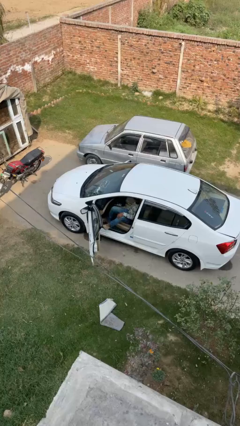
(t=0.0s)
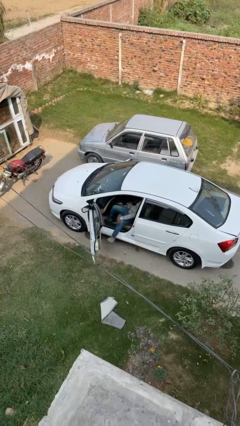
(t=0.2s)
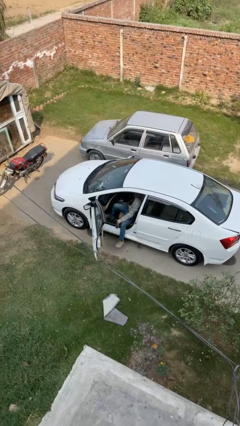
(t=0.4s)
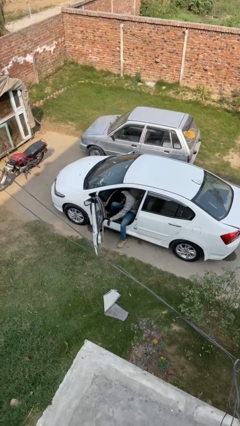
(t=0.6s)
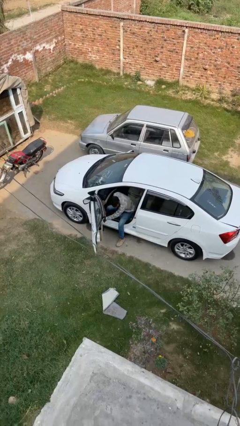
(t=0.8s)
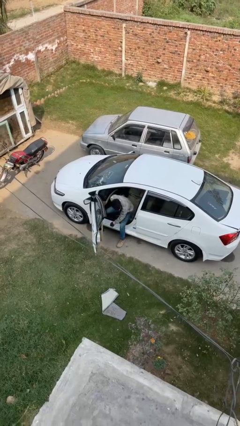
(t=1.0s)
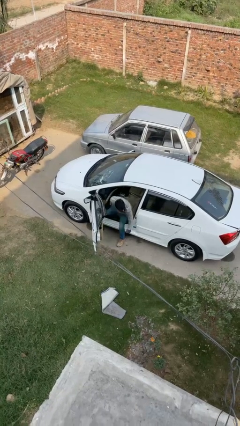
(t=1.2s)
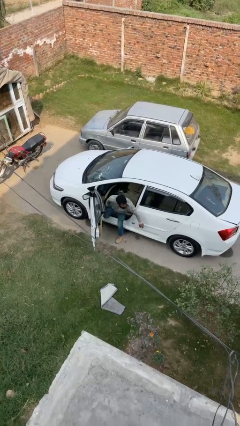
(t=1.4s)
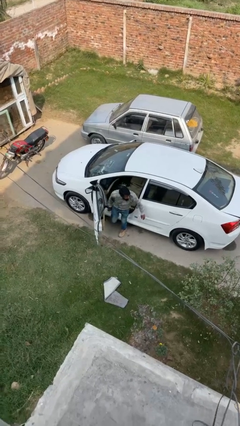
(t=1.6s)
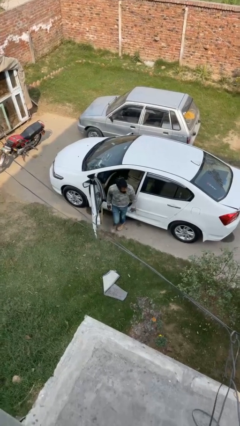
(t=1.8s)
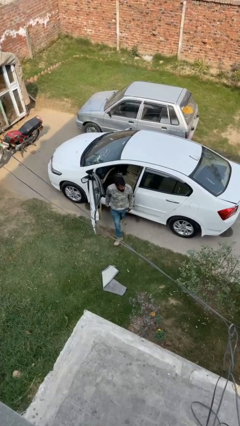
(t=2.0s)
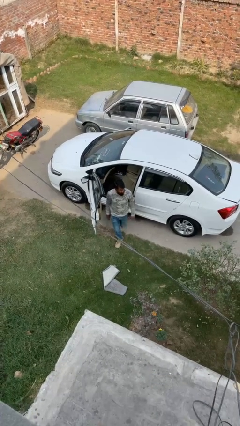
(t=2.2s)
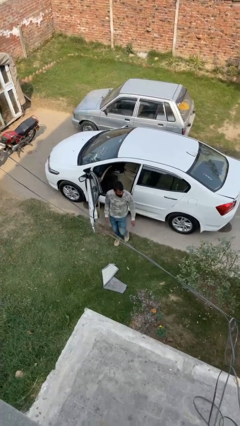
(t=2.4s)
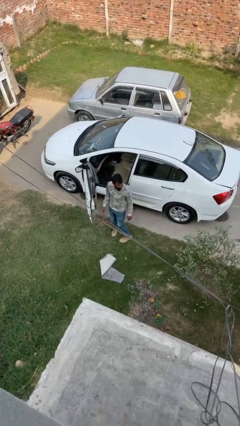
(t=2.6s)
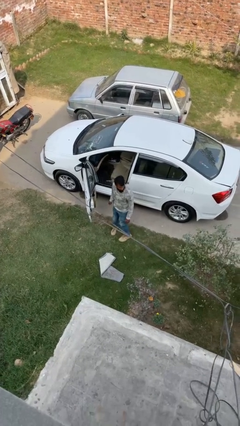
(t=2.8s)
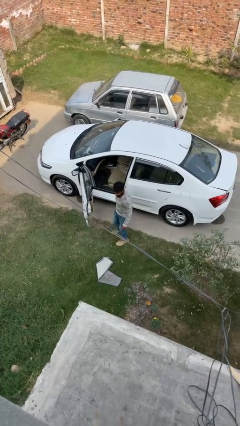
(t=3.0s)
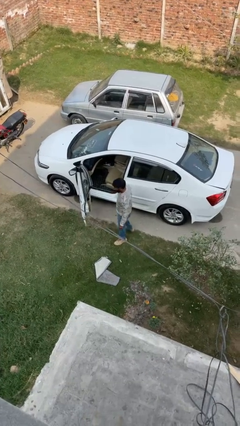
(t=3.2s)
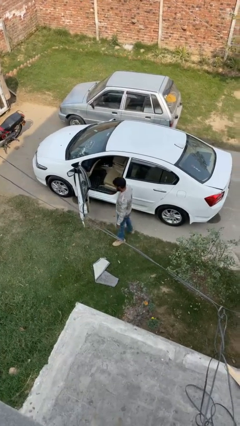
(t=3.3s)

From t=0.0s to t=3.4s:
person exits car

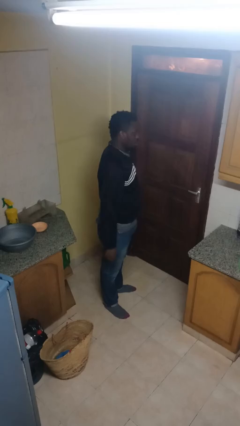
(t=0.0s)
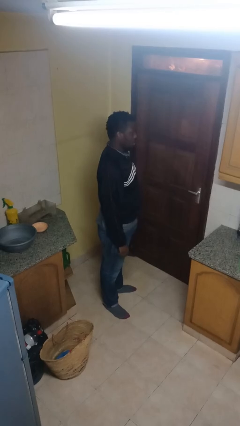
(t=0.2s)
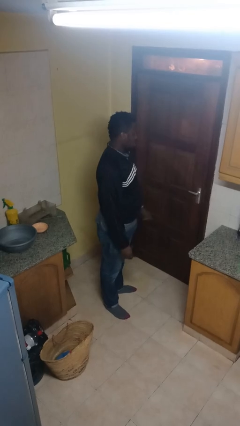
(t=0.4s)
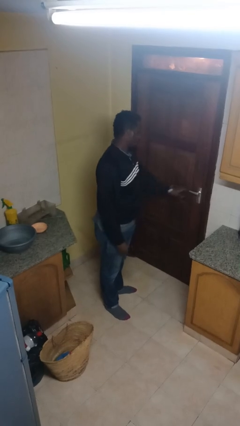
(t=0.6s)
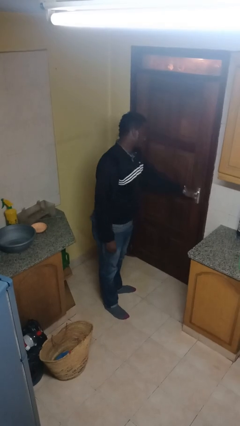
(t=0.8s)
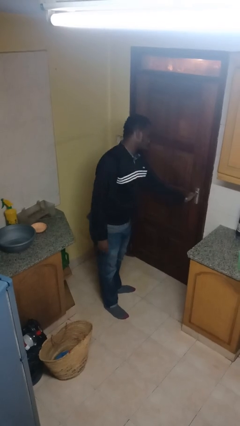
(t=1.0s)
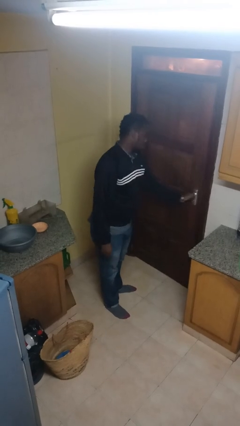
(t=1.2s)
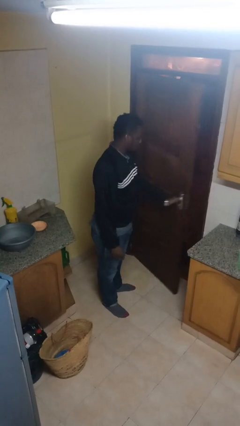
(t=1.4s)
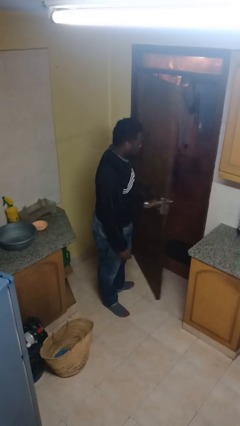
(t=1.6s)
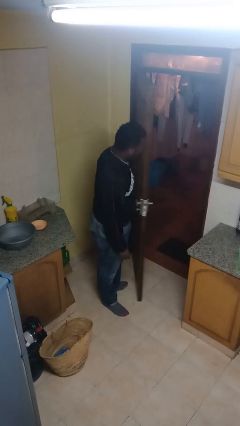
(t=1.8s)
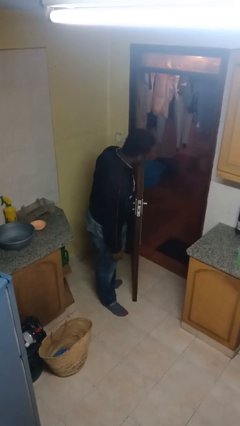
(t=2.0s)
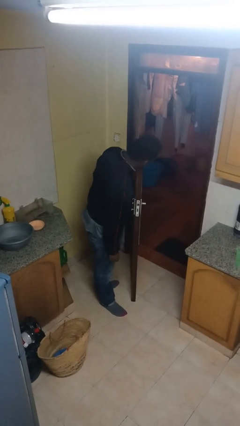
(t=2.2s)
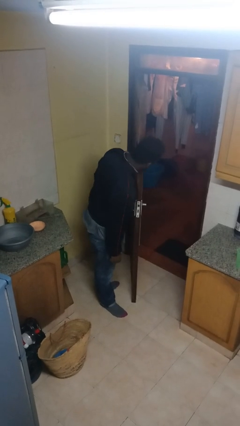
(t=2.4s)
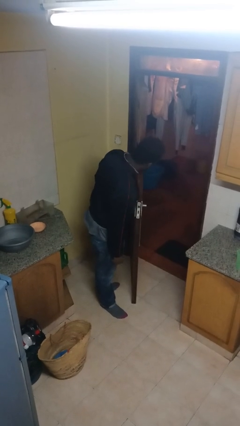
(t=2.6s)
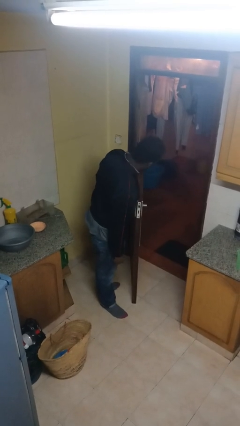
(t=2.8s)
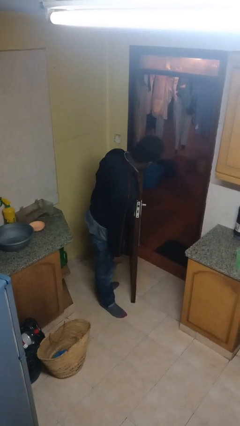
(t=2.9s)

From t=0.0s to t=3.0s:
person opens facility door

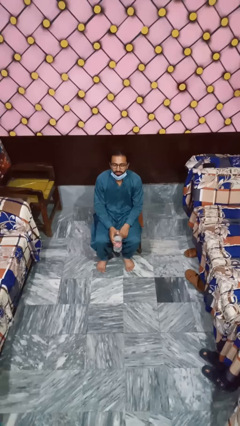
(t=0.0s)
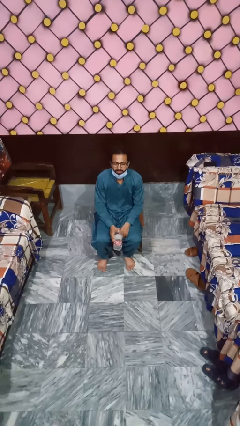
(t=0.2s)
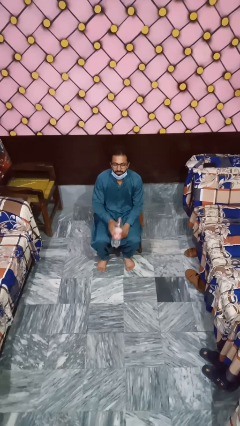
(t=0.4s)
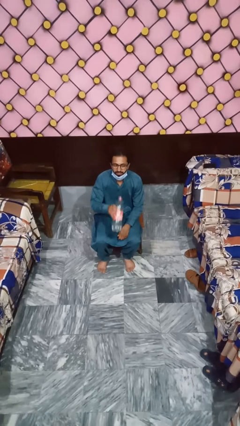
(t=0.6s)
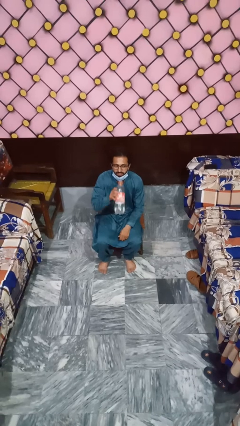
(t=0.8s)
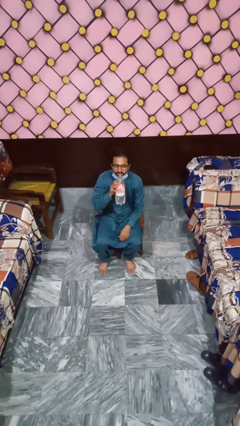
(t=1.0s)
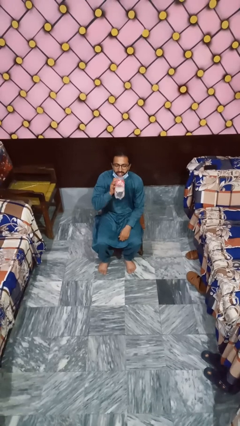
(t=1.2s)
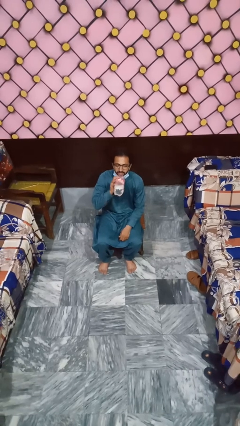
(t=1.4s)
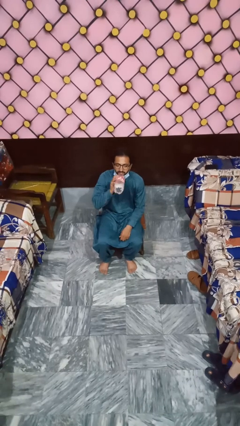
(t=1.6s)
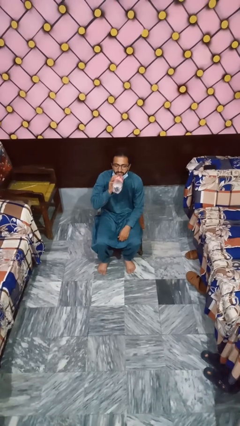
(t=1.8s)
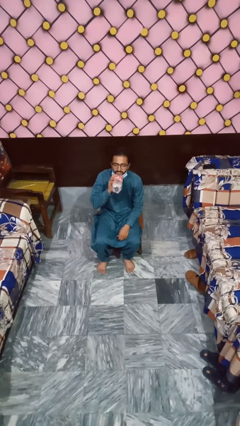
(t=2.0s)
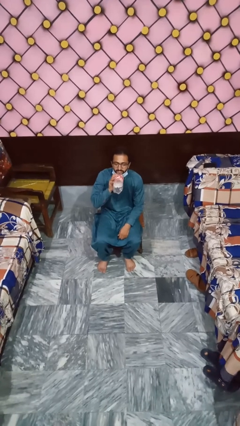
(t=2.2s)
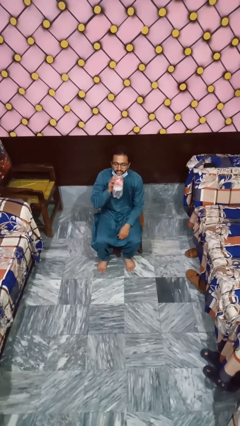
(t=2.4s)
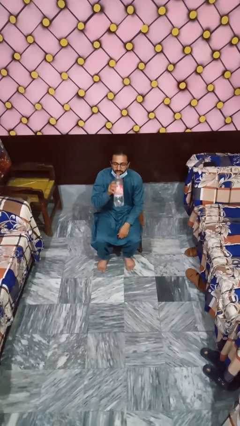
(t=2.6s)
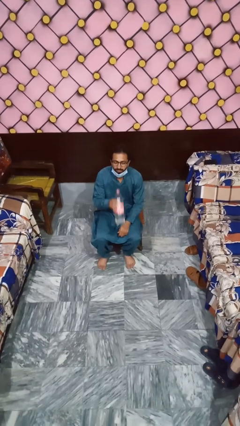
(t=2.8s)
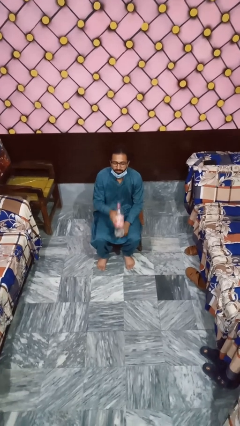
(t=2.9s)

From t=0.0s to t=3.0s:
person drinks from bottle

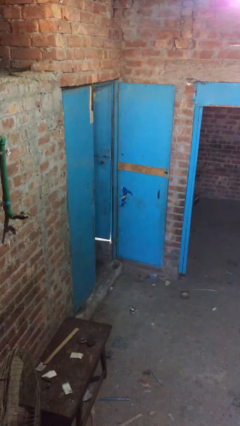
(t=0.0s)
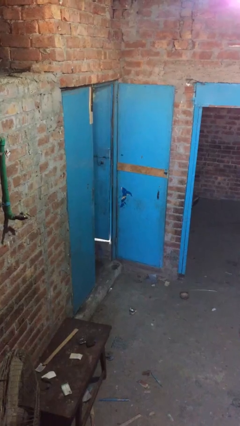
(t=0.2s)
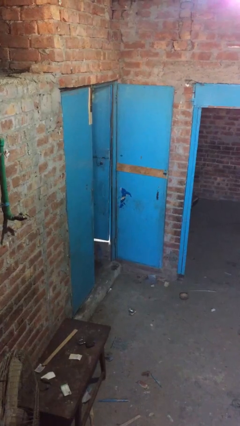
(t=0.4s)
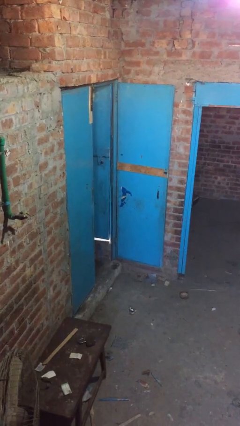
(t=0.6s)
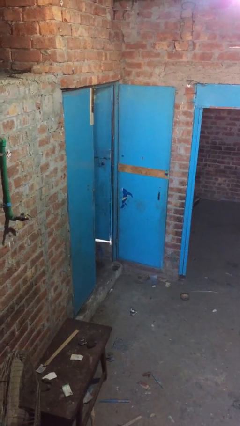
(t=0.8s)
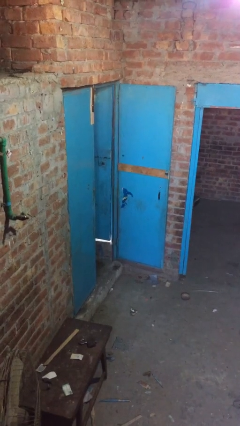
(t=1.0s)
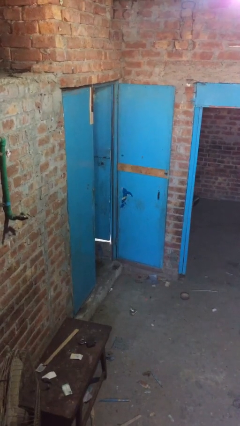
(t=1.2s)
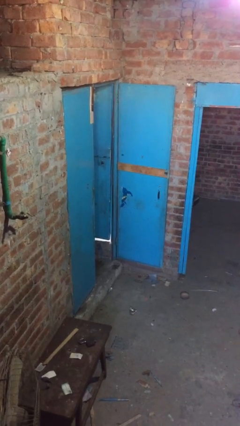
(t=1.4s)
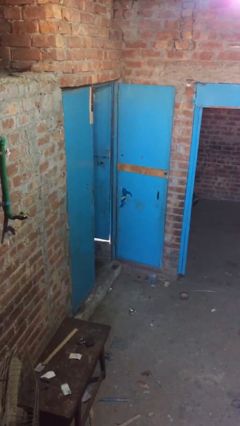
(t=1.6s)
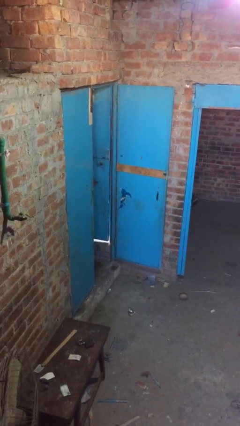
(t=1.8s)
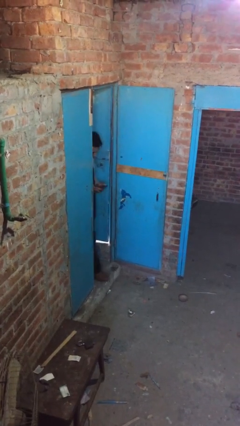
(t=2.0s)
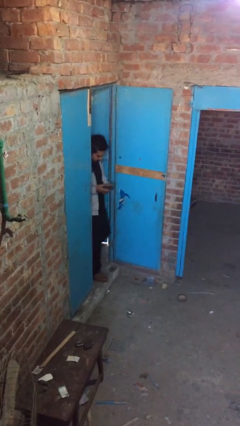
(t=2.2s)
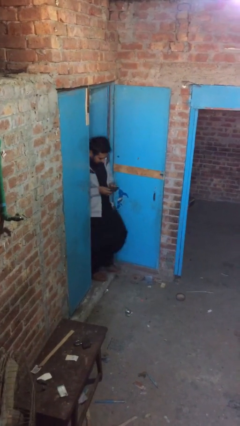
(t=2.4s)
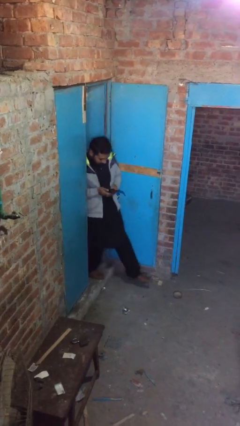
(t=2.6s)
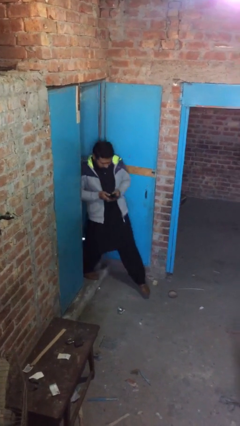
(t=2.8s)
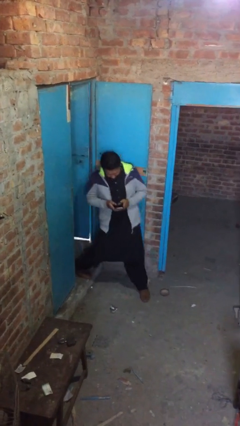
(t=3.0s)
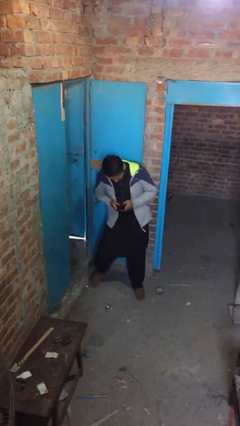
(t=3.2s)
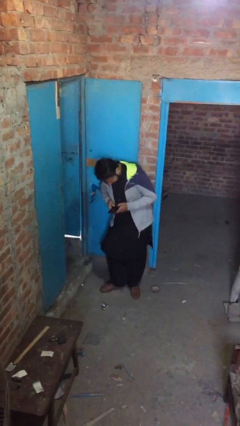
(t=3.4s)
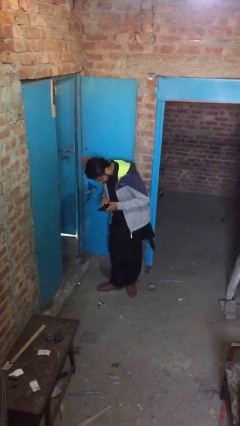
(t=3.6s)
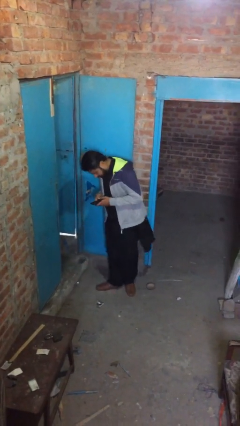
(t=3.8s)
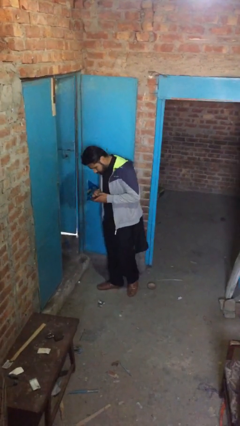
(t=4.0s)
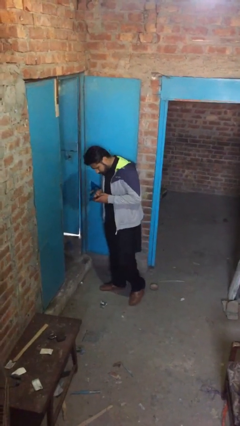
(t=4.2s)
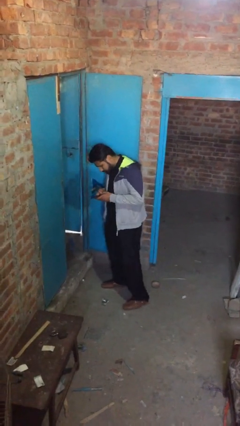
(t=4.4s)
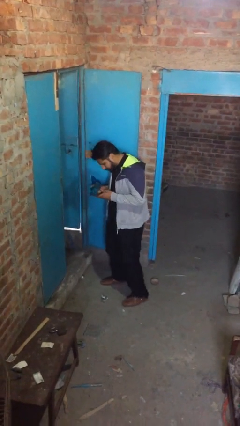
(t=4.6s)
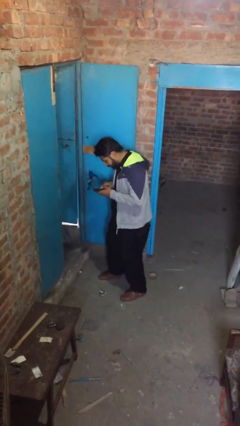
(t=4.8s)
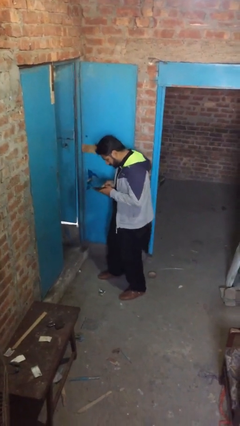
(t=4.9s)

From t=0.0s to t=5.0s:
person enters scene through structure

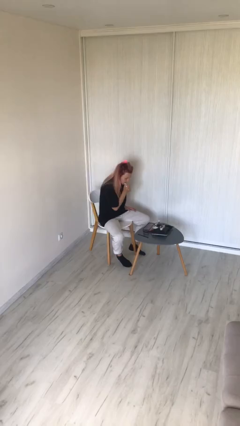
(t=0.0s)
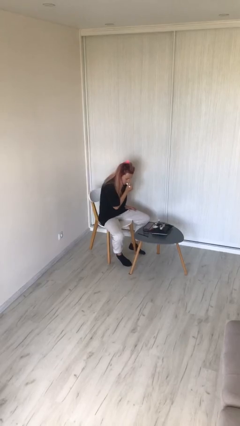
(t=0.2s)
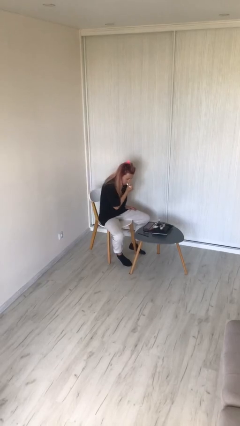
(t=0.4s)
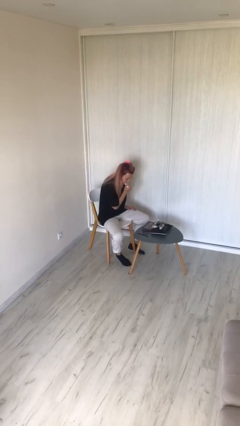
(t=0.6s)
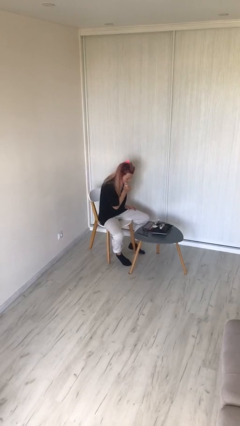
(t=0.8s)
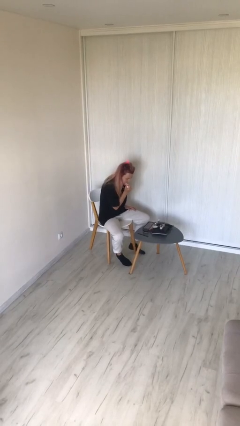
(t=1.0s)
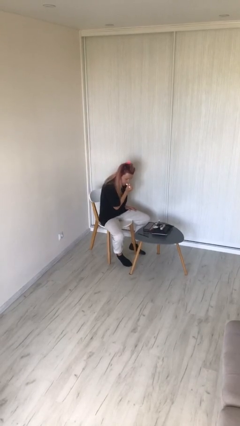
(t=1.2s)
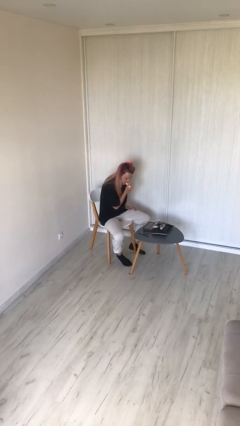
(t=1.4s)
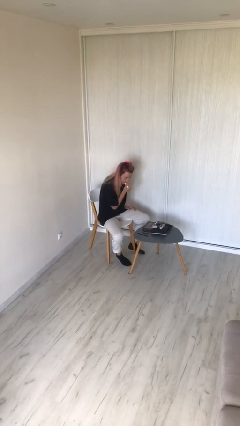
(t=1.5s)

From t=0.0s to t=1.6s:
person applies lip makeup

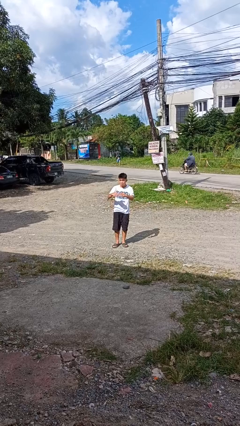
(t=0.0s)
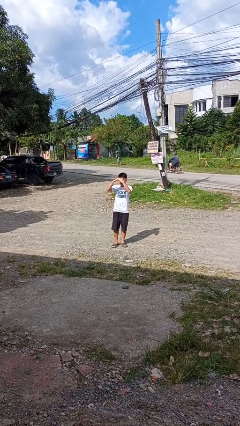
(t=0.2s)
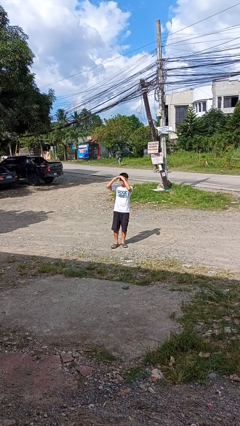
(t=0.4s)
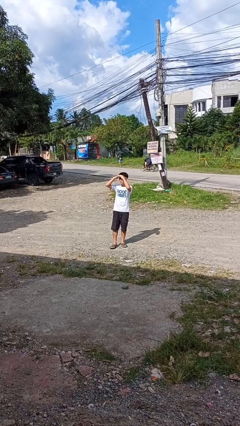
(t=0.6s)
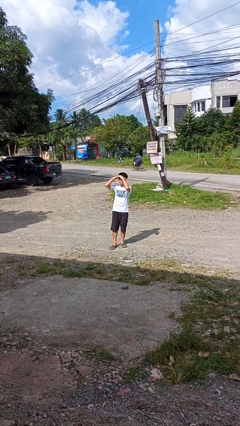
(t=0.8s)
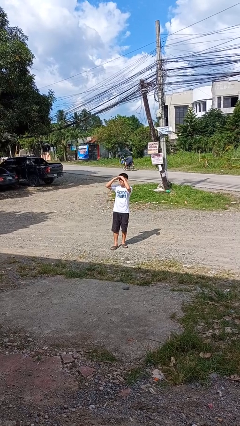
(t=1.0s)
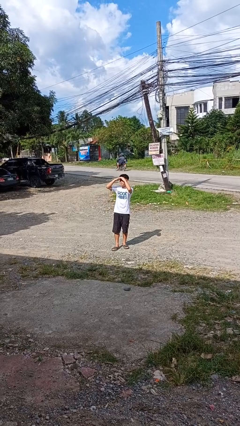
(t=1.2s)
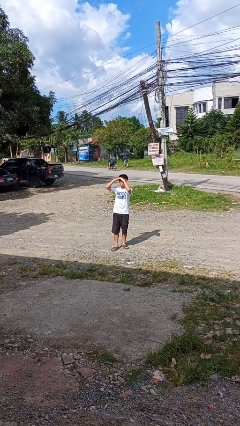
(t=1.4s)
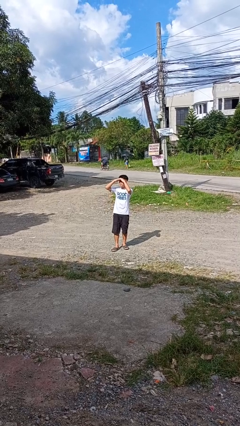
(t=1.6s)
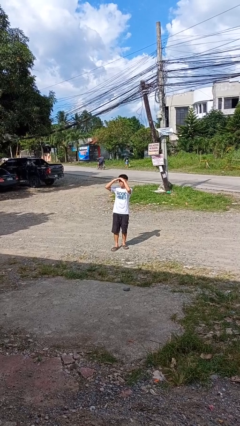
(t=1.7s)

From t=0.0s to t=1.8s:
person shades eyes
